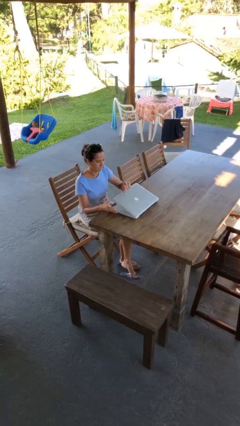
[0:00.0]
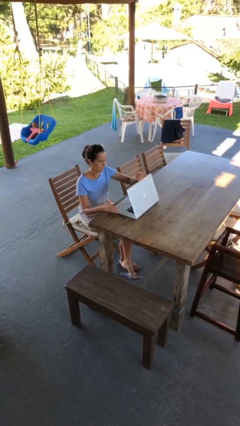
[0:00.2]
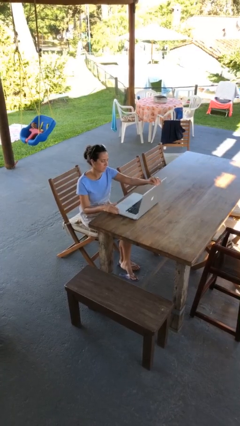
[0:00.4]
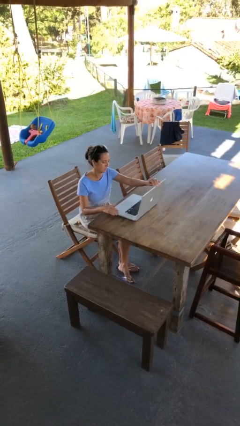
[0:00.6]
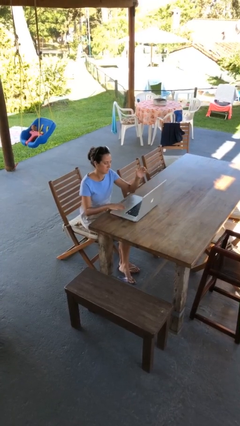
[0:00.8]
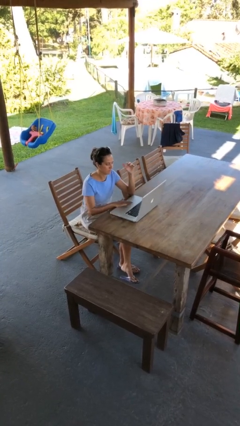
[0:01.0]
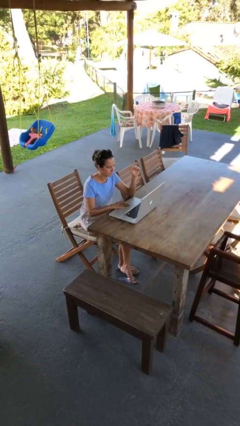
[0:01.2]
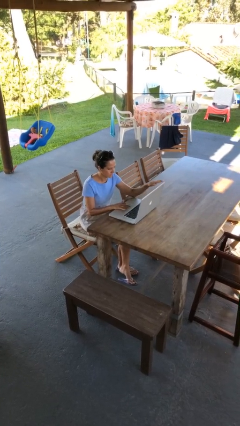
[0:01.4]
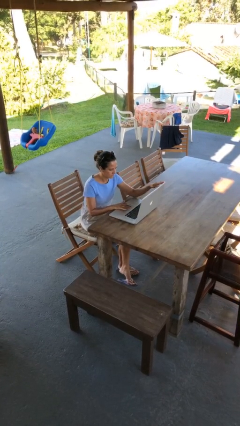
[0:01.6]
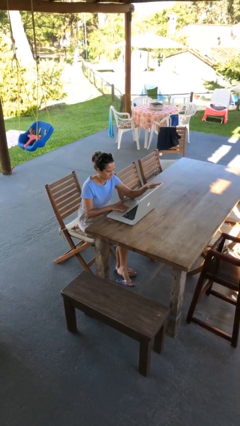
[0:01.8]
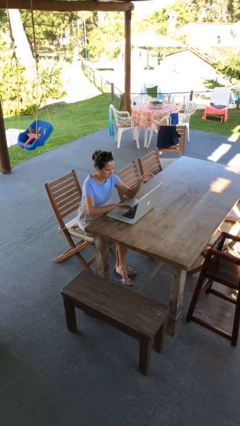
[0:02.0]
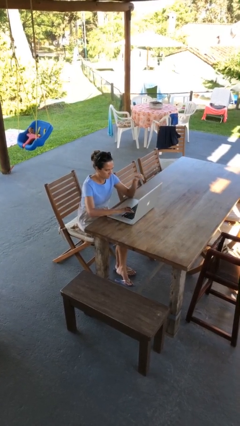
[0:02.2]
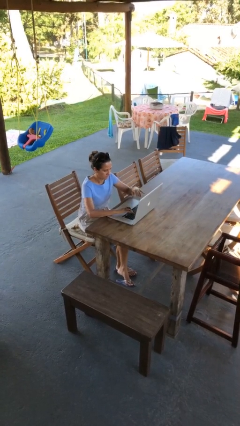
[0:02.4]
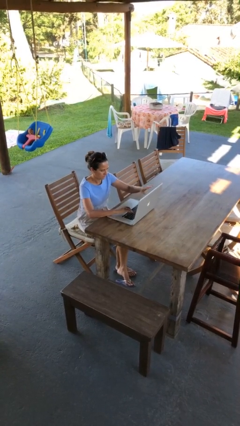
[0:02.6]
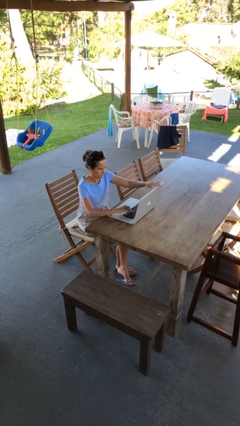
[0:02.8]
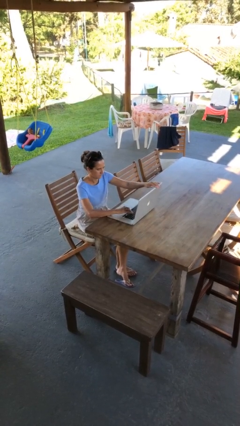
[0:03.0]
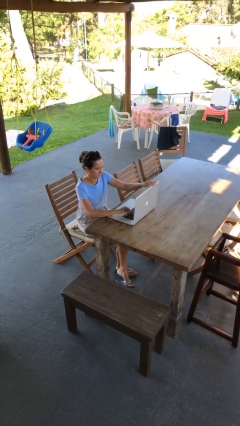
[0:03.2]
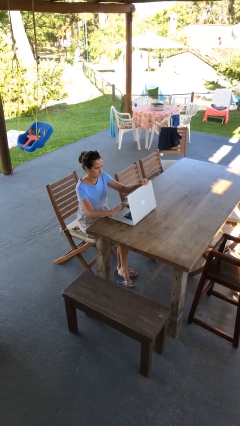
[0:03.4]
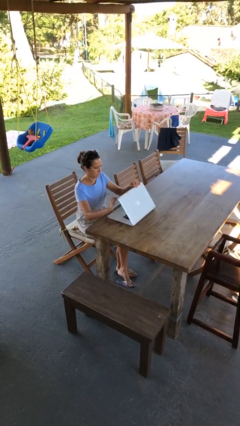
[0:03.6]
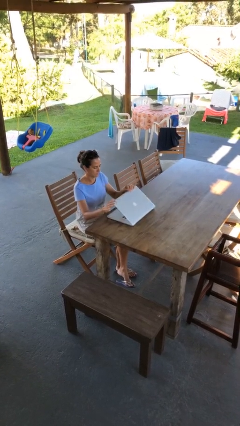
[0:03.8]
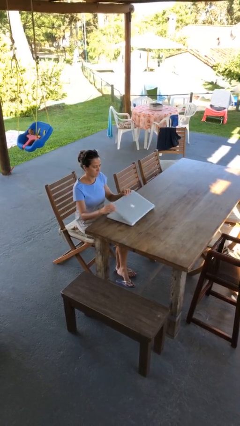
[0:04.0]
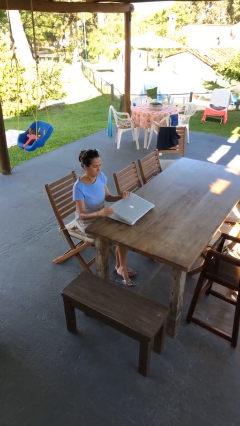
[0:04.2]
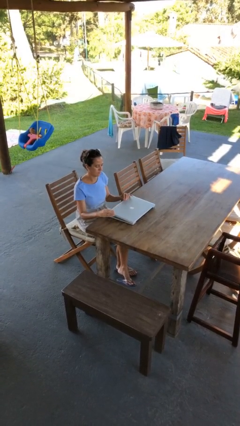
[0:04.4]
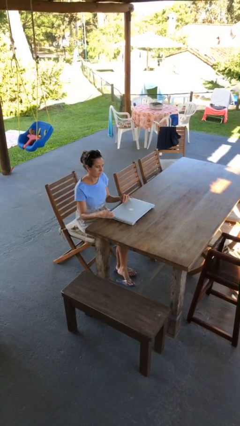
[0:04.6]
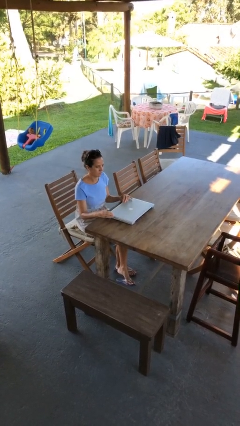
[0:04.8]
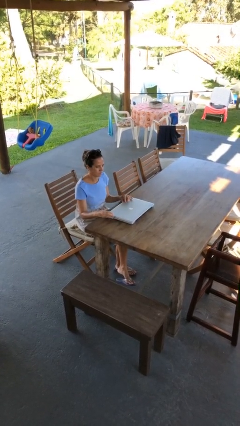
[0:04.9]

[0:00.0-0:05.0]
person interacts with laptop

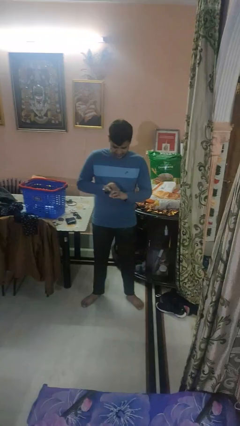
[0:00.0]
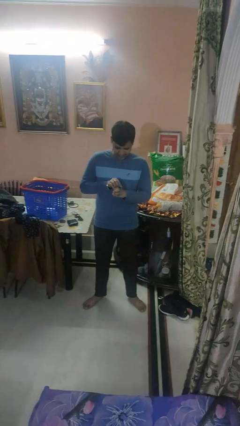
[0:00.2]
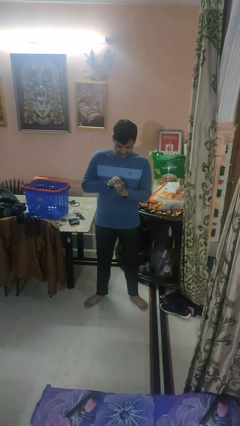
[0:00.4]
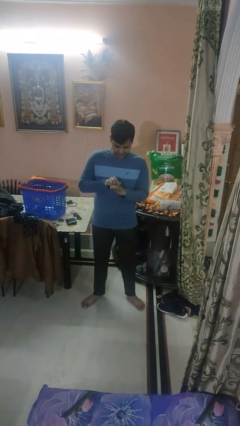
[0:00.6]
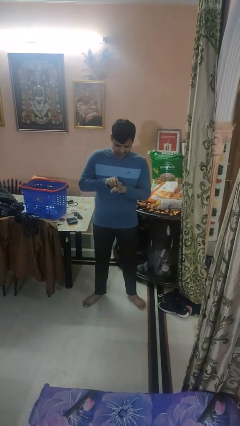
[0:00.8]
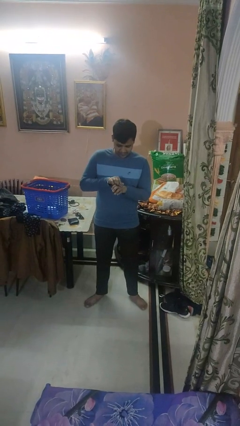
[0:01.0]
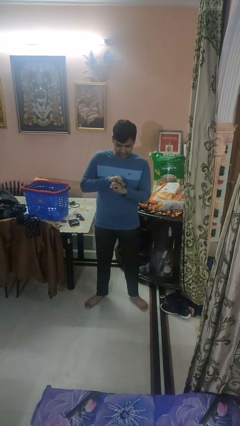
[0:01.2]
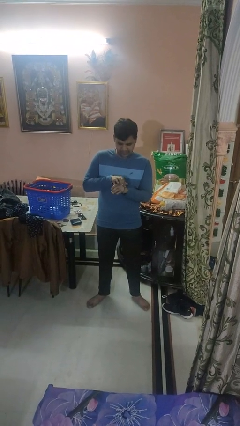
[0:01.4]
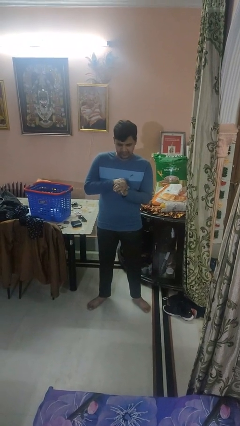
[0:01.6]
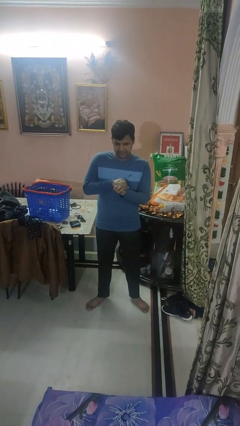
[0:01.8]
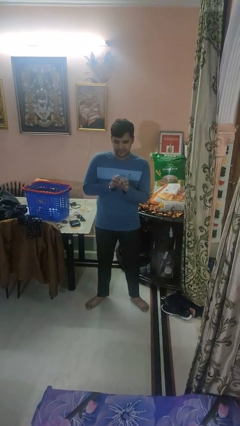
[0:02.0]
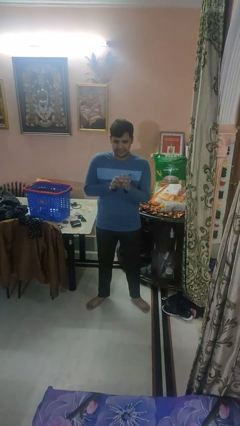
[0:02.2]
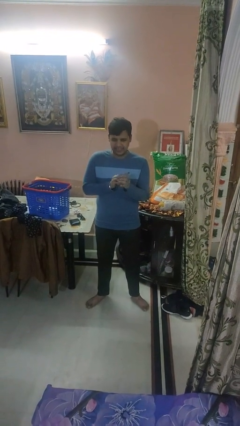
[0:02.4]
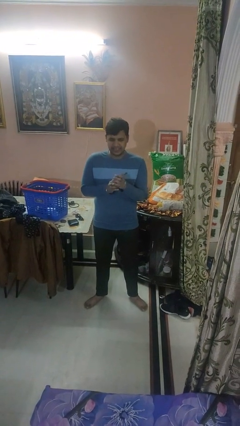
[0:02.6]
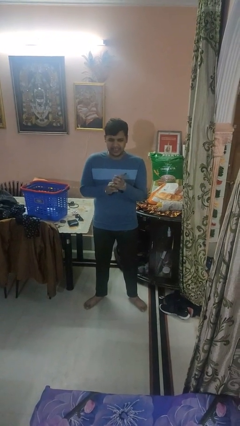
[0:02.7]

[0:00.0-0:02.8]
person puts on wristwatch

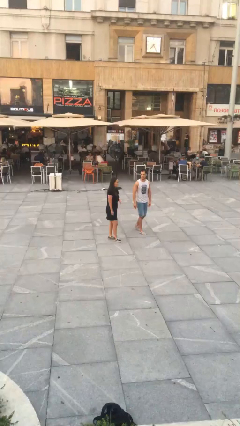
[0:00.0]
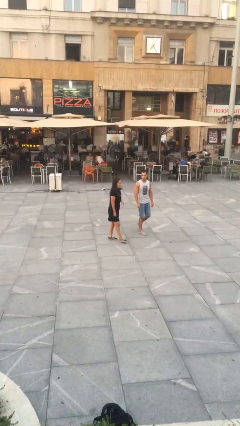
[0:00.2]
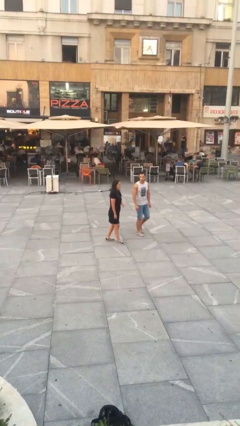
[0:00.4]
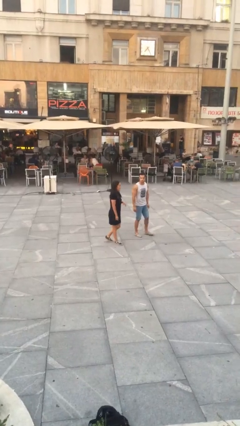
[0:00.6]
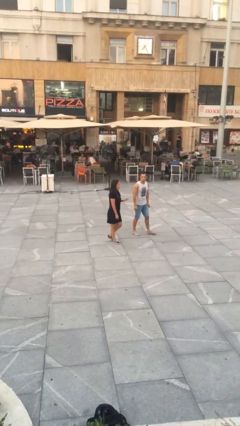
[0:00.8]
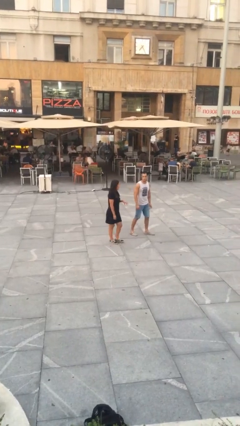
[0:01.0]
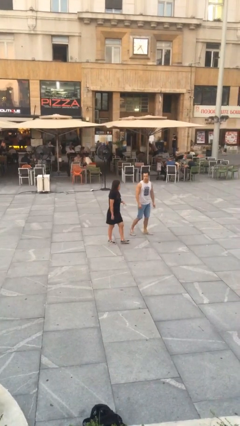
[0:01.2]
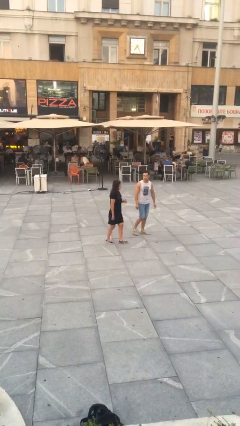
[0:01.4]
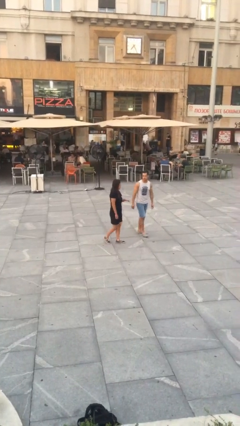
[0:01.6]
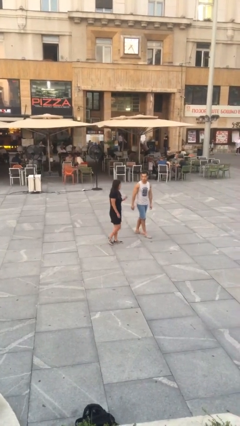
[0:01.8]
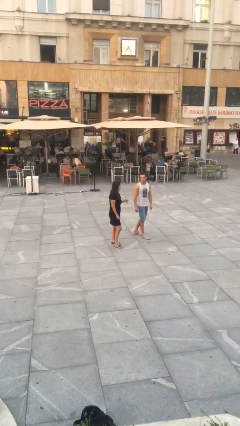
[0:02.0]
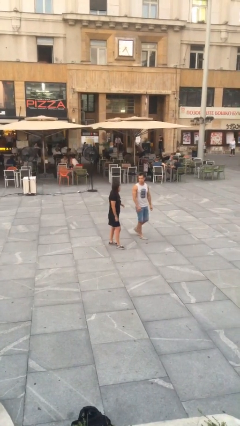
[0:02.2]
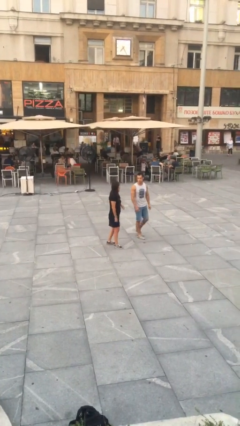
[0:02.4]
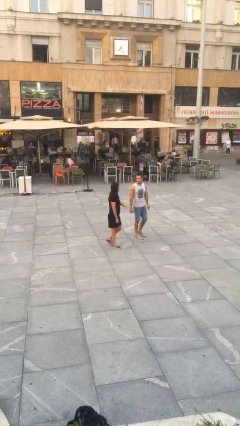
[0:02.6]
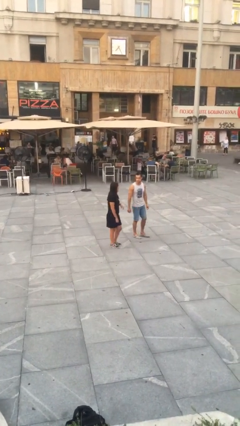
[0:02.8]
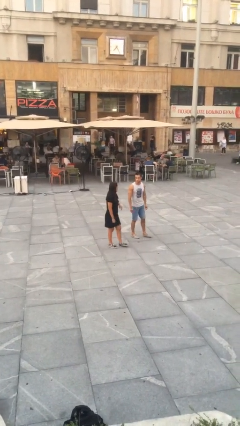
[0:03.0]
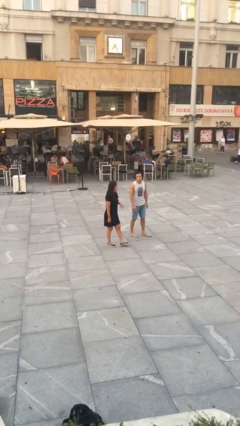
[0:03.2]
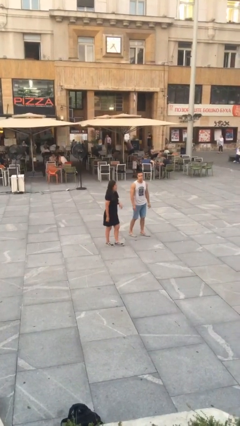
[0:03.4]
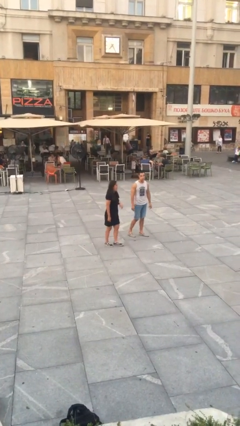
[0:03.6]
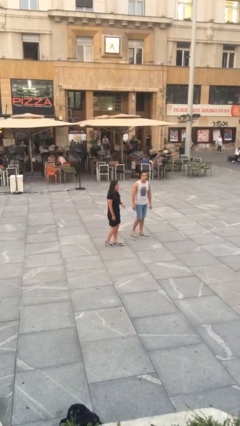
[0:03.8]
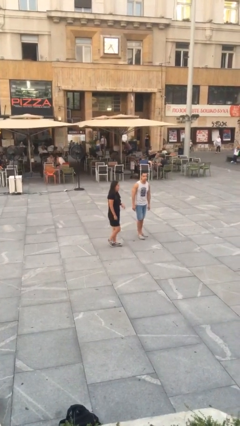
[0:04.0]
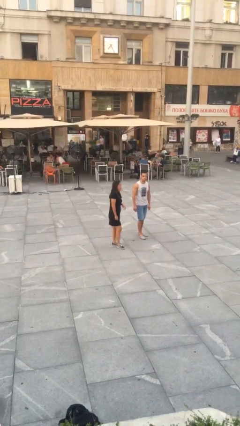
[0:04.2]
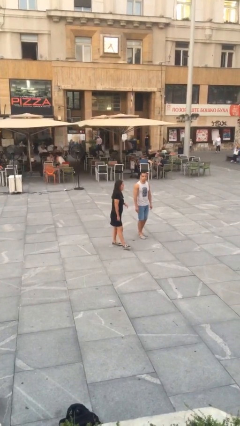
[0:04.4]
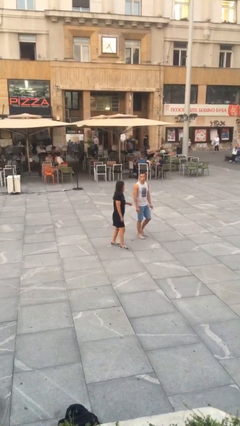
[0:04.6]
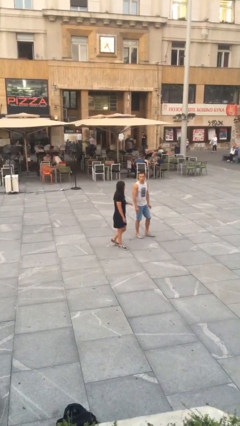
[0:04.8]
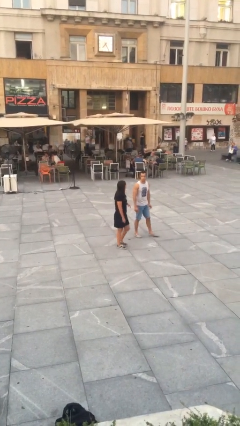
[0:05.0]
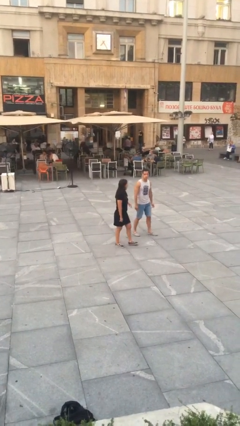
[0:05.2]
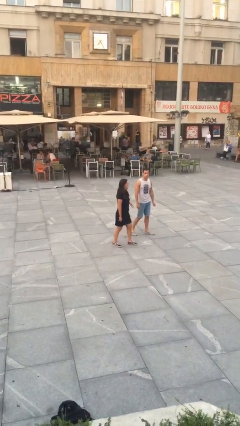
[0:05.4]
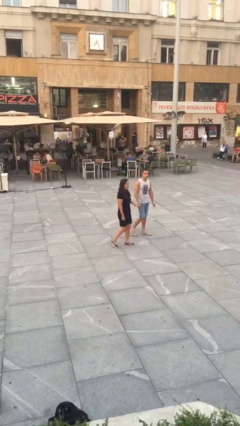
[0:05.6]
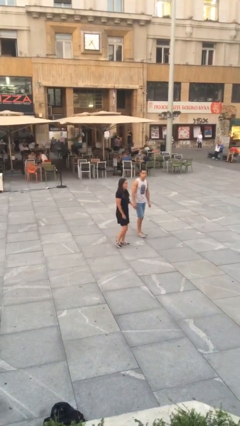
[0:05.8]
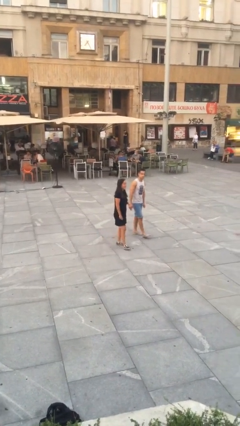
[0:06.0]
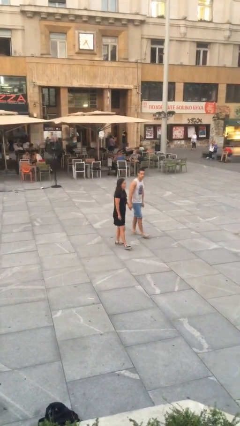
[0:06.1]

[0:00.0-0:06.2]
person talks to person

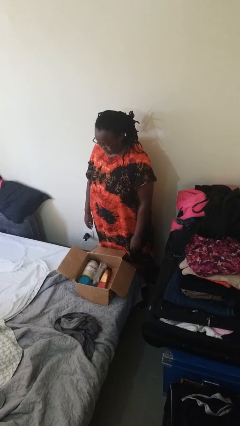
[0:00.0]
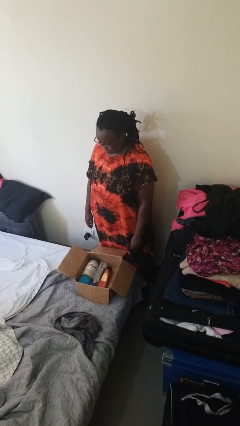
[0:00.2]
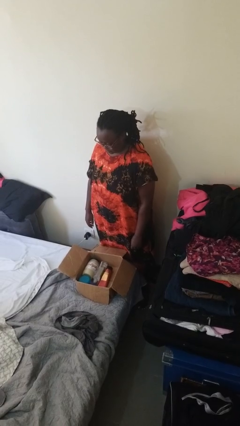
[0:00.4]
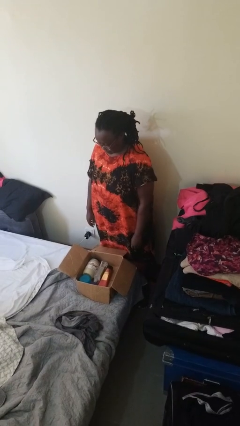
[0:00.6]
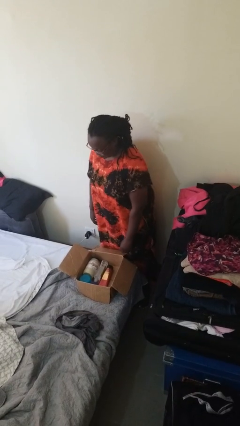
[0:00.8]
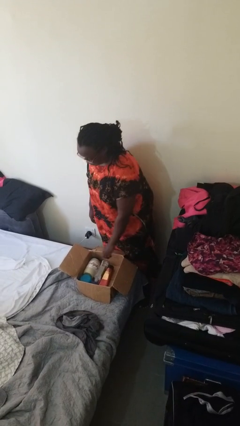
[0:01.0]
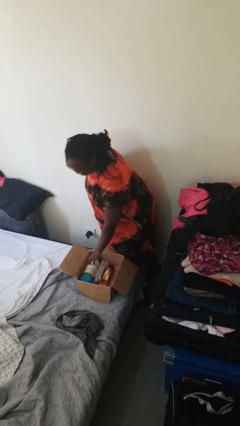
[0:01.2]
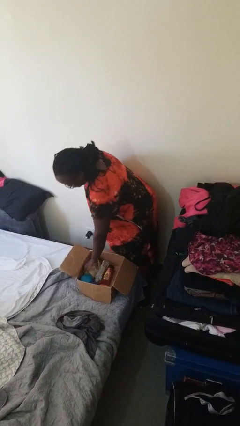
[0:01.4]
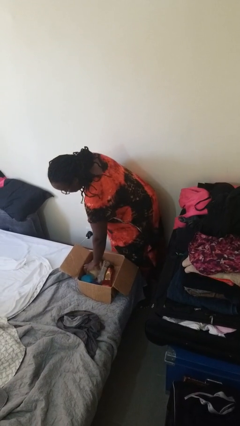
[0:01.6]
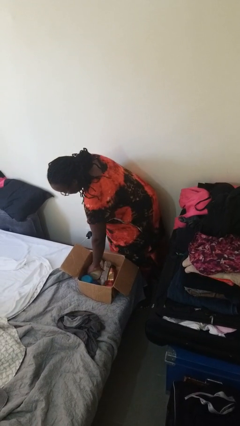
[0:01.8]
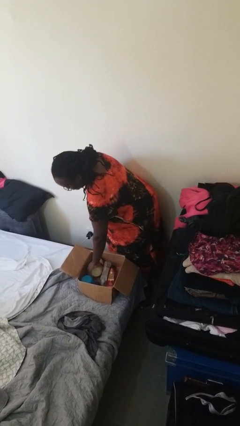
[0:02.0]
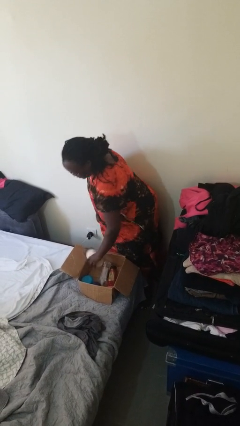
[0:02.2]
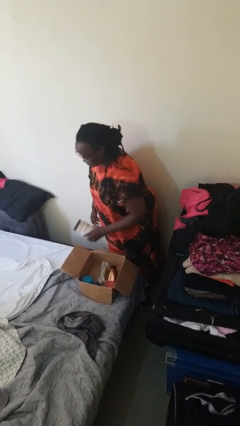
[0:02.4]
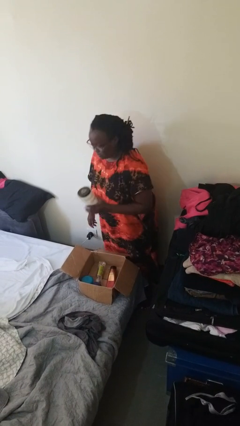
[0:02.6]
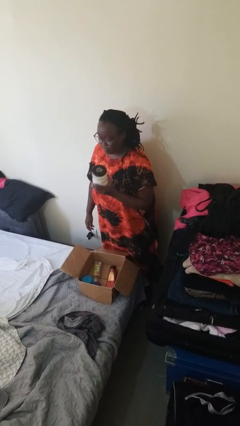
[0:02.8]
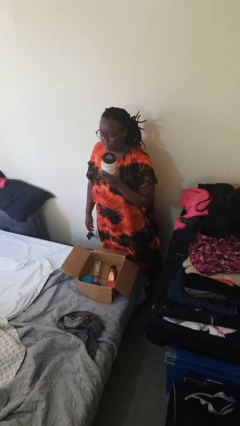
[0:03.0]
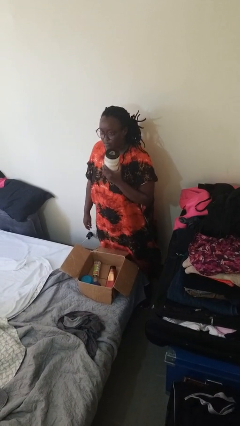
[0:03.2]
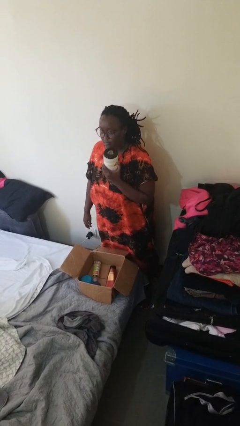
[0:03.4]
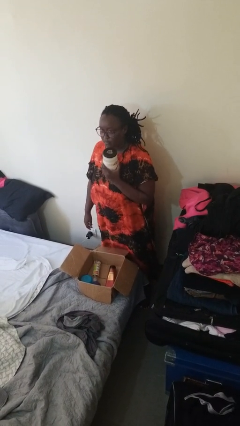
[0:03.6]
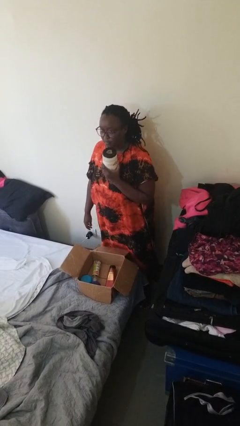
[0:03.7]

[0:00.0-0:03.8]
person takes object from box
